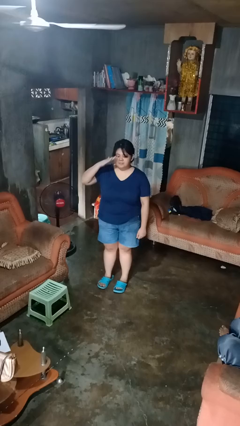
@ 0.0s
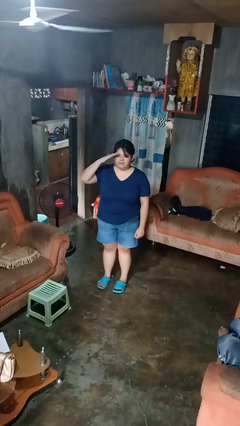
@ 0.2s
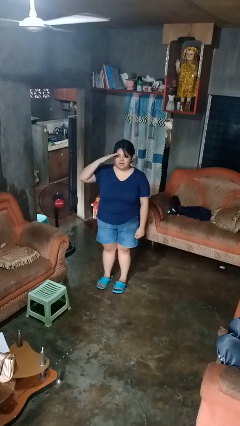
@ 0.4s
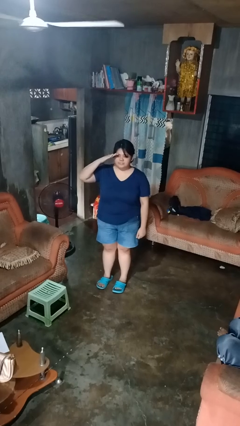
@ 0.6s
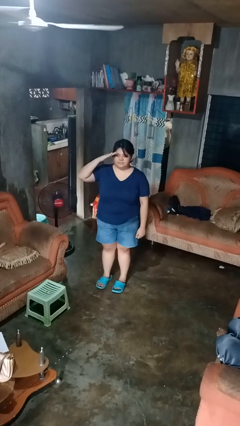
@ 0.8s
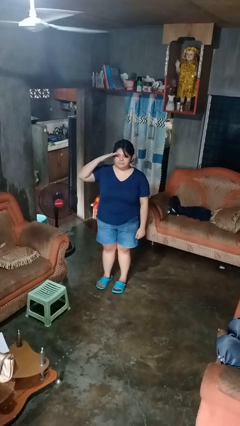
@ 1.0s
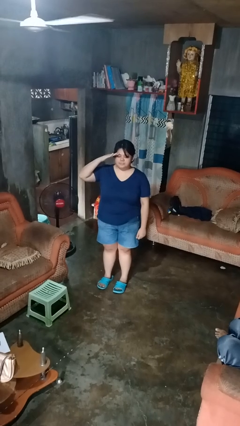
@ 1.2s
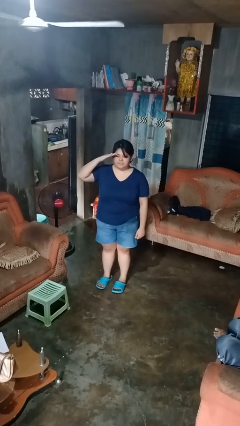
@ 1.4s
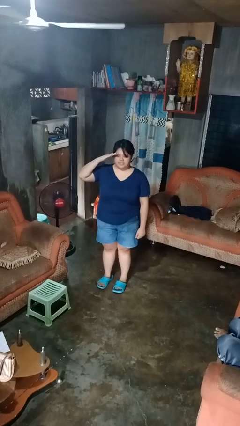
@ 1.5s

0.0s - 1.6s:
person salutes

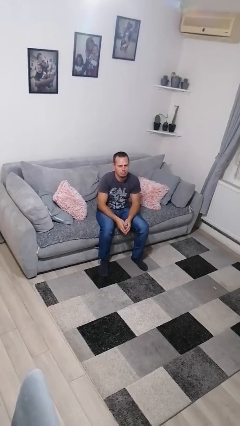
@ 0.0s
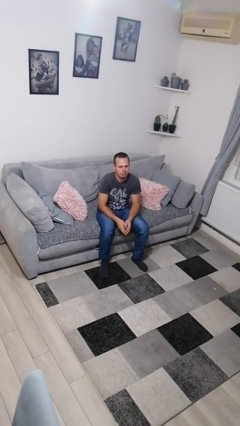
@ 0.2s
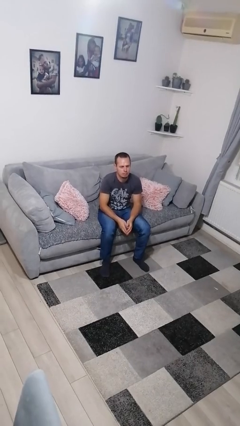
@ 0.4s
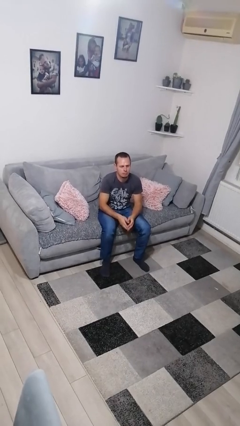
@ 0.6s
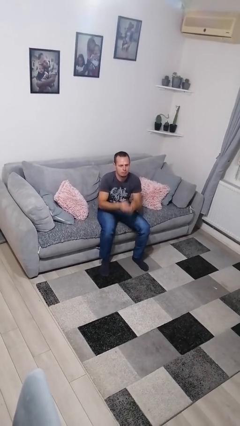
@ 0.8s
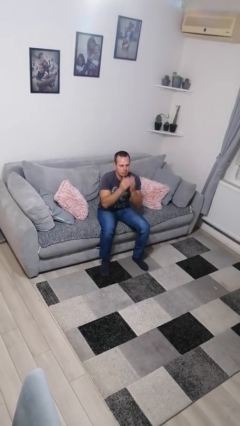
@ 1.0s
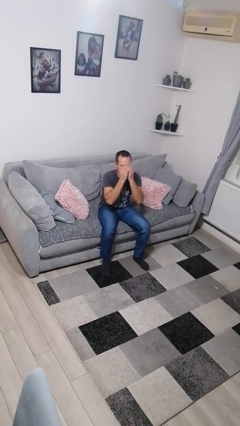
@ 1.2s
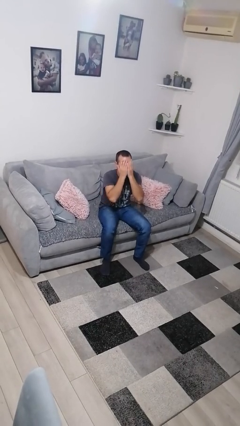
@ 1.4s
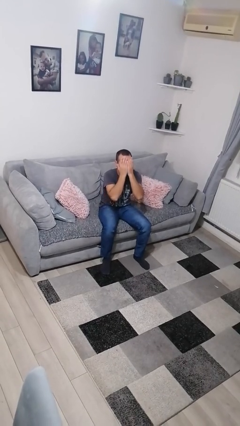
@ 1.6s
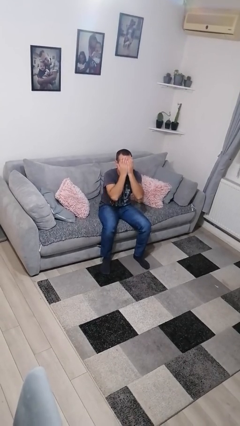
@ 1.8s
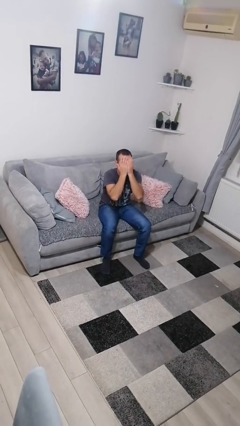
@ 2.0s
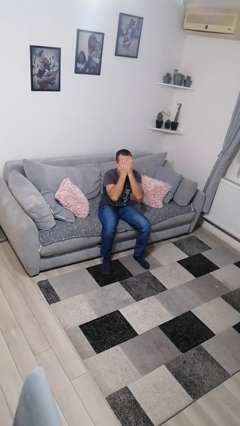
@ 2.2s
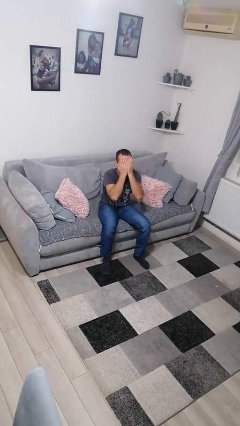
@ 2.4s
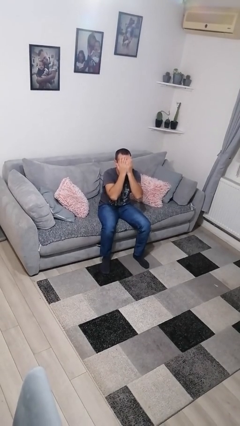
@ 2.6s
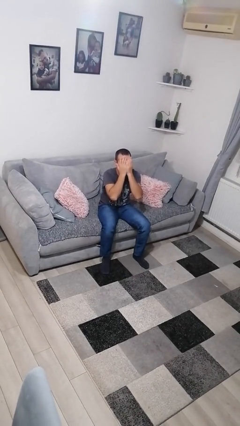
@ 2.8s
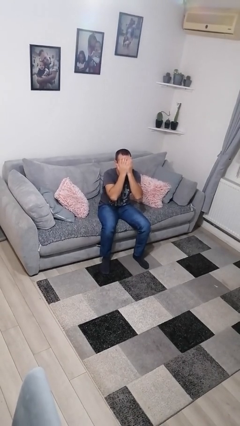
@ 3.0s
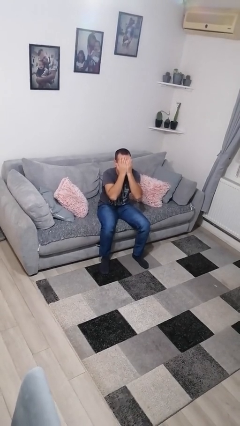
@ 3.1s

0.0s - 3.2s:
person covers face with hands

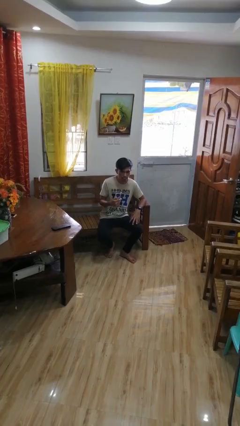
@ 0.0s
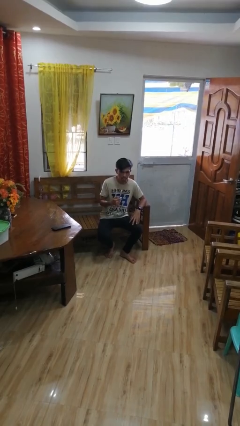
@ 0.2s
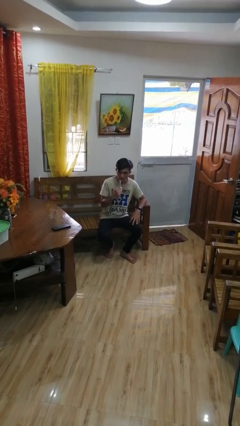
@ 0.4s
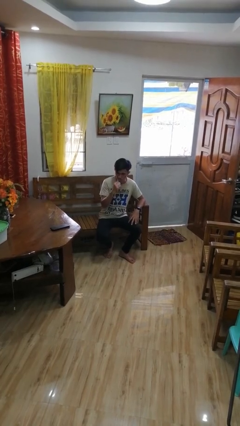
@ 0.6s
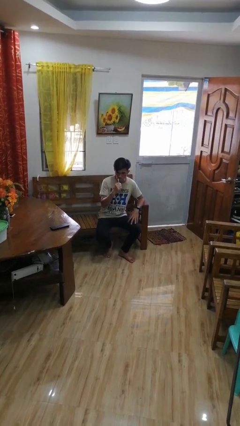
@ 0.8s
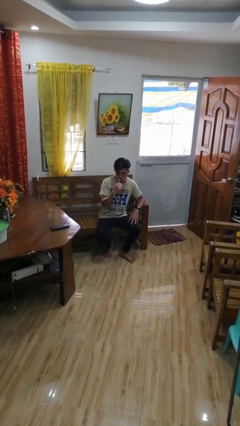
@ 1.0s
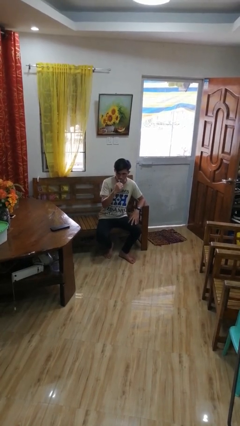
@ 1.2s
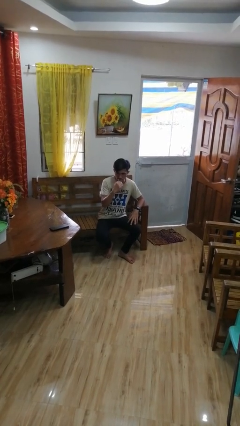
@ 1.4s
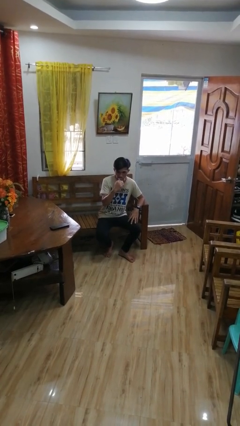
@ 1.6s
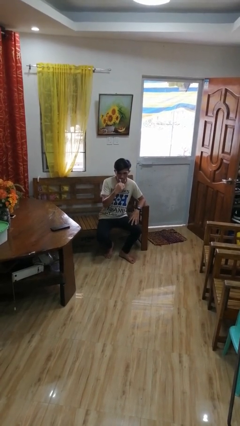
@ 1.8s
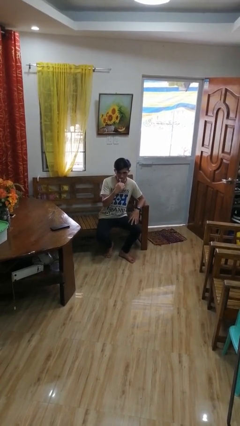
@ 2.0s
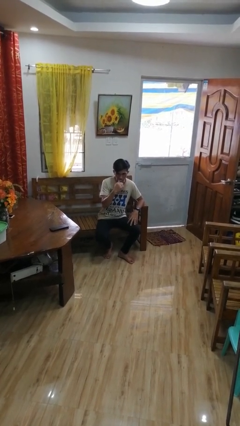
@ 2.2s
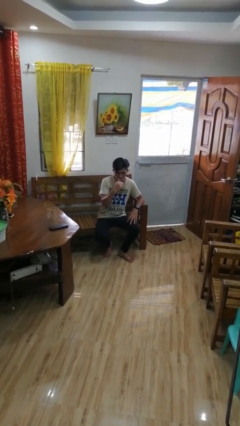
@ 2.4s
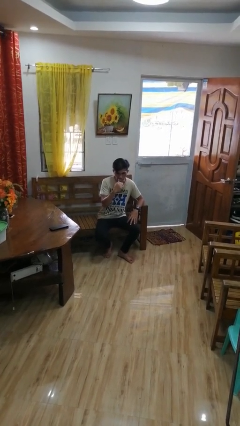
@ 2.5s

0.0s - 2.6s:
person brushes teeth

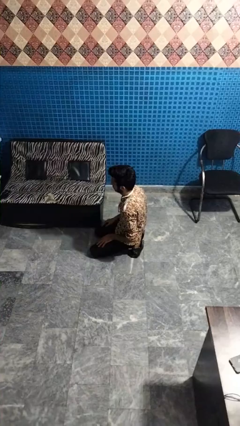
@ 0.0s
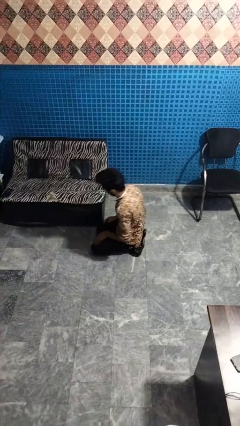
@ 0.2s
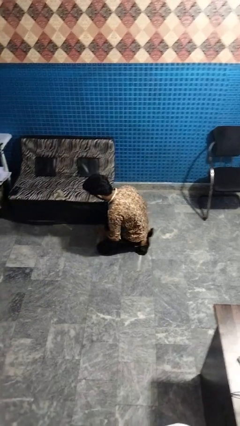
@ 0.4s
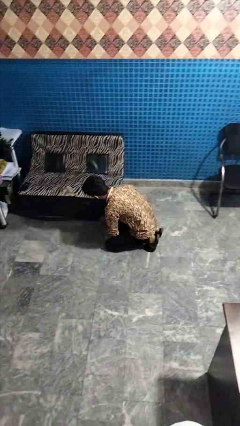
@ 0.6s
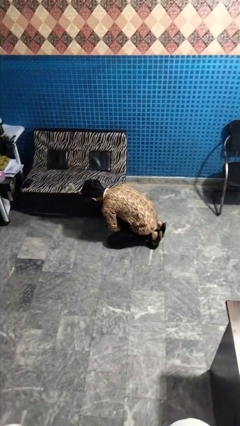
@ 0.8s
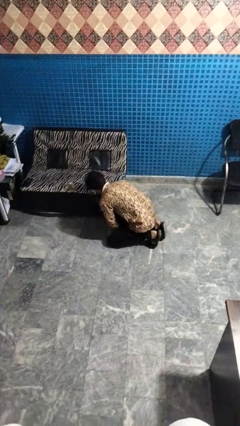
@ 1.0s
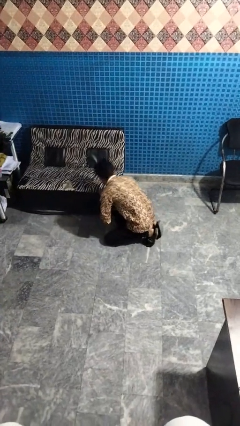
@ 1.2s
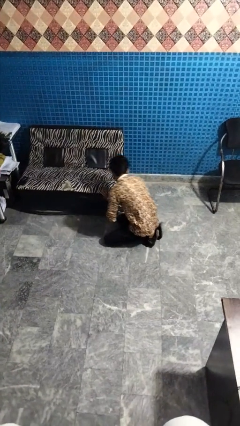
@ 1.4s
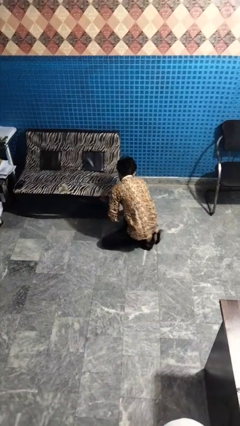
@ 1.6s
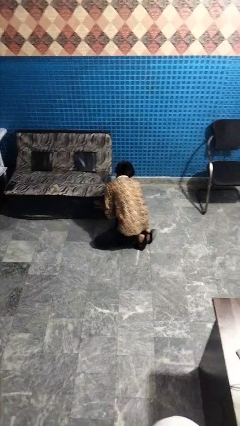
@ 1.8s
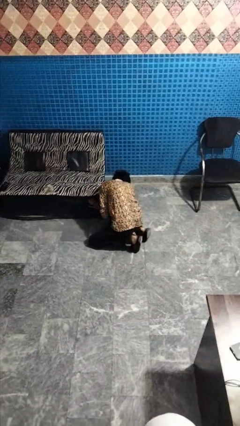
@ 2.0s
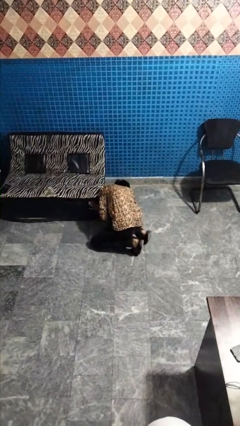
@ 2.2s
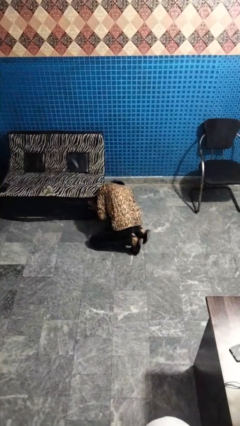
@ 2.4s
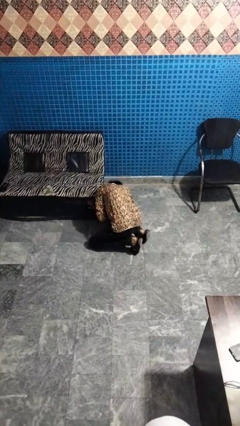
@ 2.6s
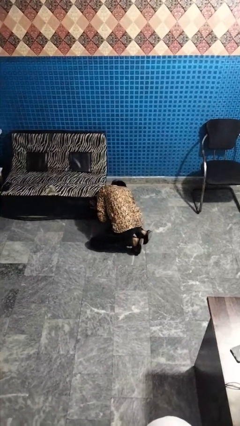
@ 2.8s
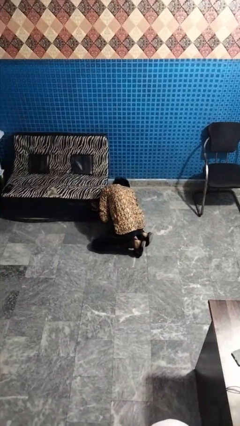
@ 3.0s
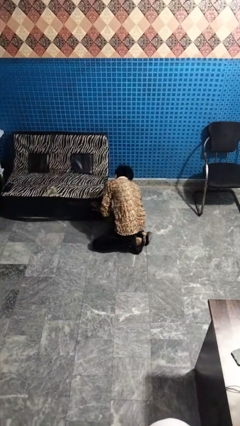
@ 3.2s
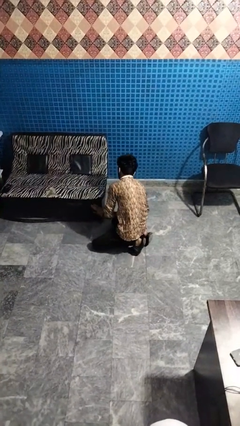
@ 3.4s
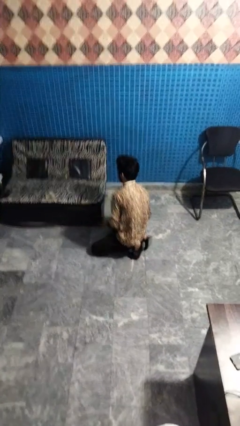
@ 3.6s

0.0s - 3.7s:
person searches under couch

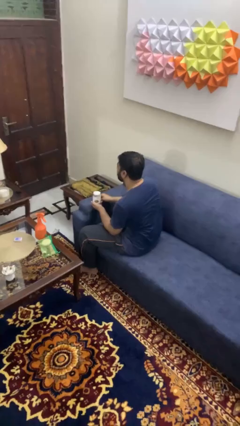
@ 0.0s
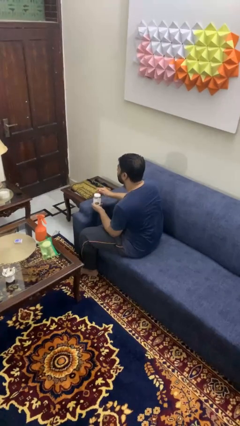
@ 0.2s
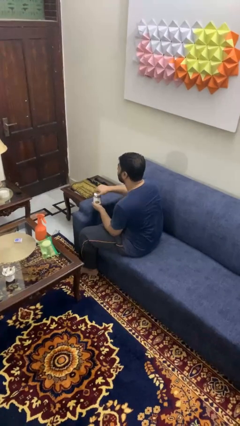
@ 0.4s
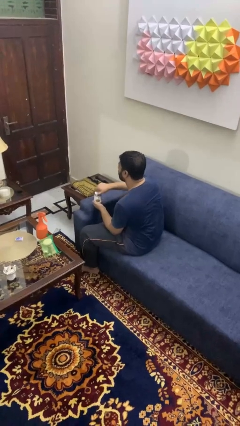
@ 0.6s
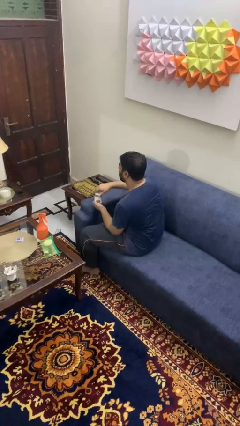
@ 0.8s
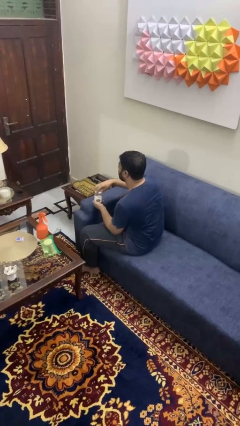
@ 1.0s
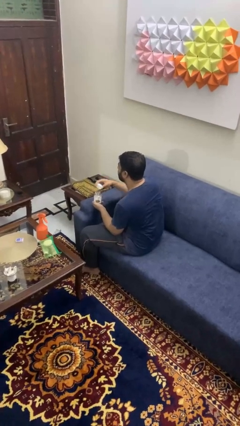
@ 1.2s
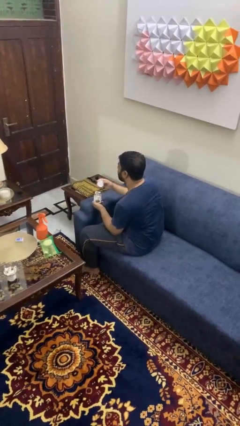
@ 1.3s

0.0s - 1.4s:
person opens jar

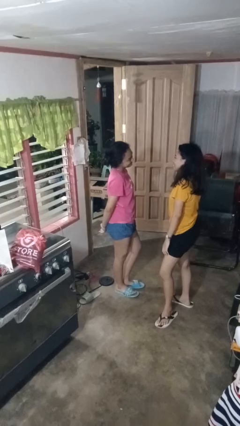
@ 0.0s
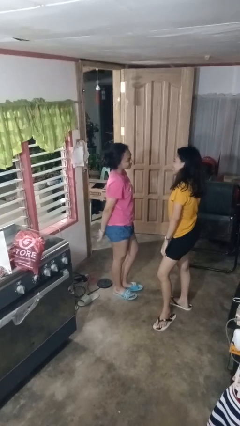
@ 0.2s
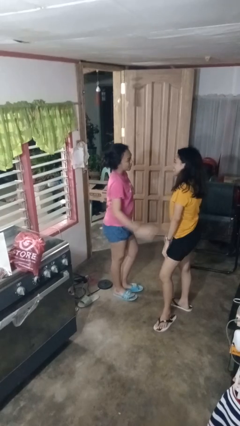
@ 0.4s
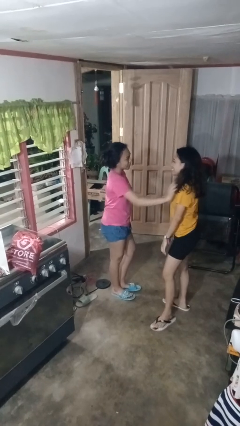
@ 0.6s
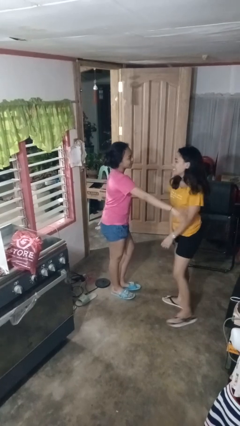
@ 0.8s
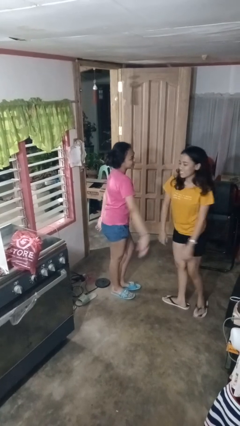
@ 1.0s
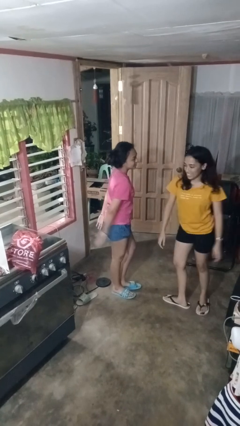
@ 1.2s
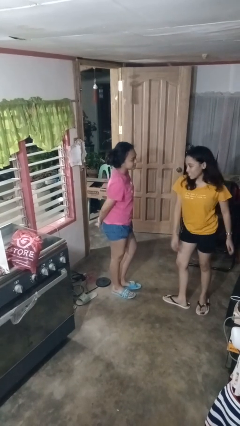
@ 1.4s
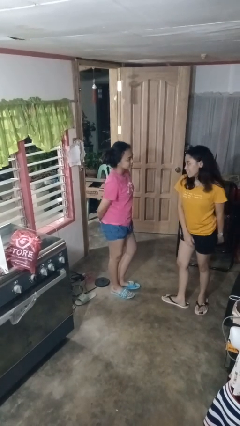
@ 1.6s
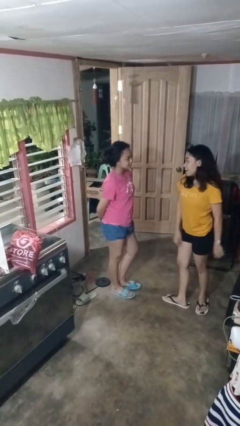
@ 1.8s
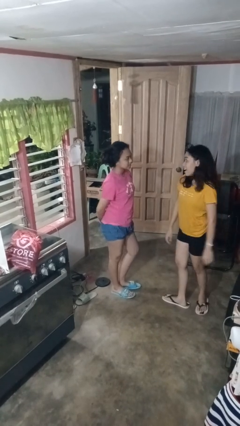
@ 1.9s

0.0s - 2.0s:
person shoves person

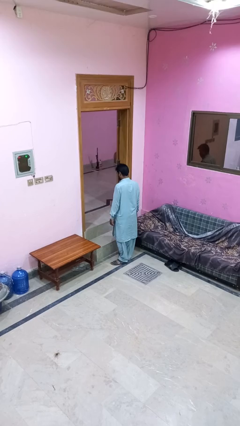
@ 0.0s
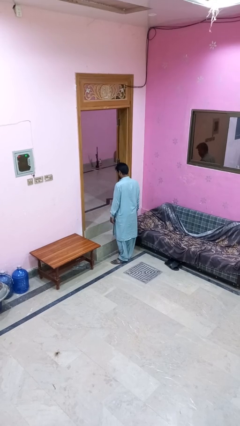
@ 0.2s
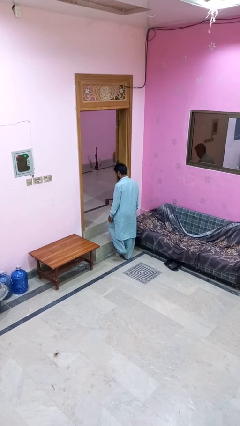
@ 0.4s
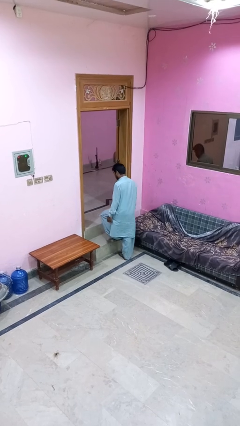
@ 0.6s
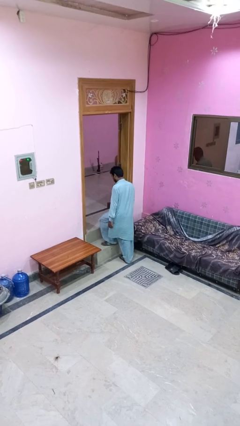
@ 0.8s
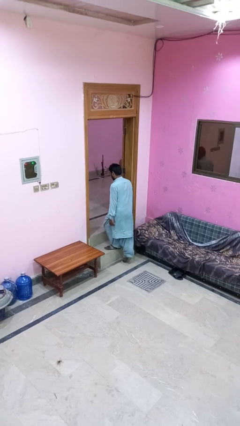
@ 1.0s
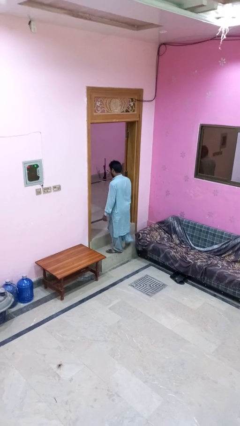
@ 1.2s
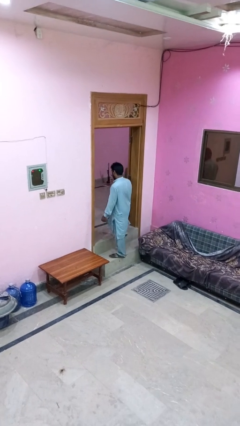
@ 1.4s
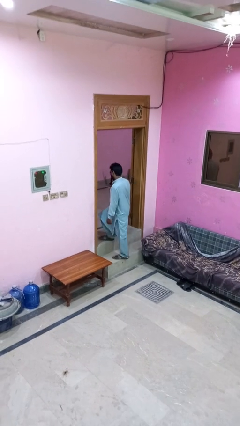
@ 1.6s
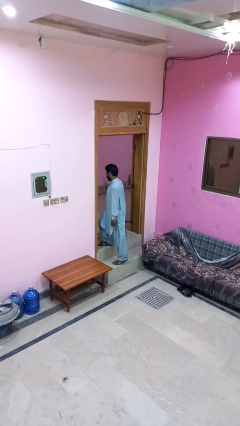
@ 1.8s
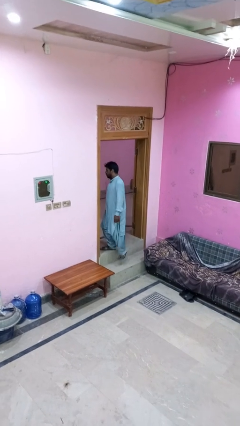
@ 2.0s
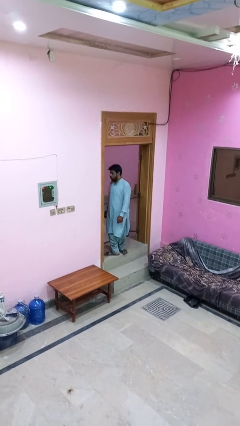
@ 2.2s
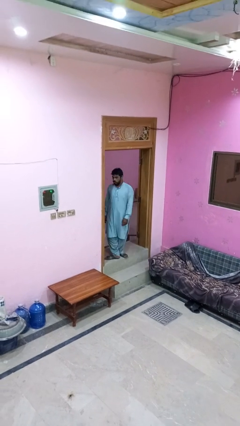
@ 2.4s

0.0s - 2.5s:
person climbs up stairs
